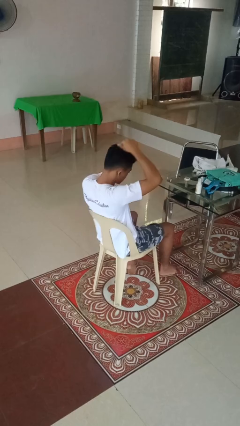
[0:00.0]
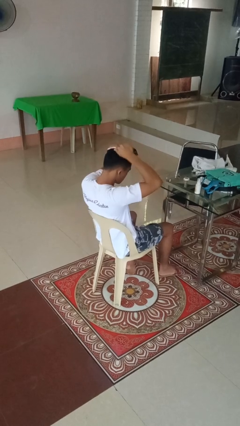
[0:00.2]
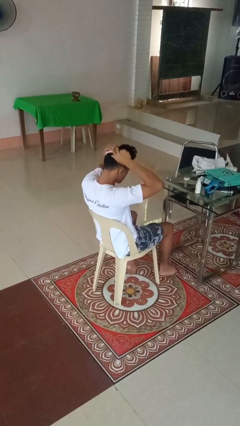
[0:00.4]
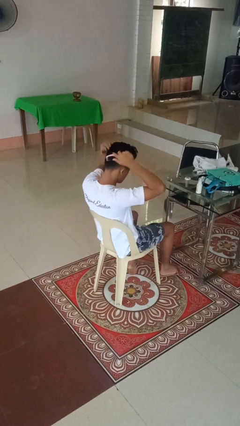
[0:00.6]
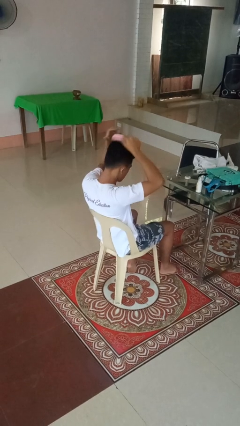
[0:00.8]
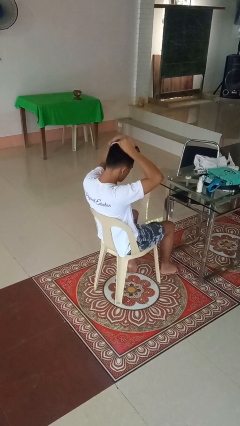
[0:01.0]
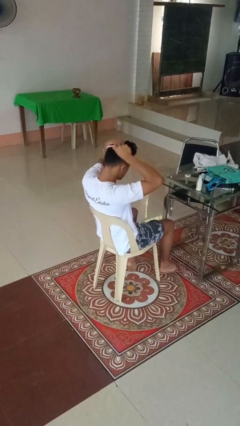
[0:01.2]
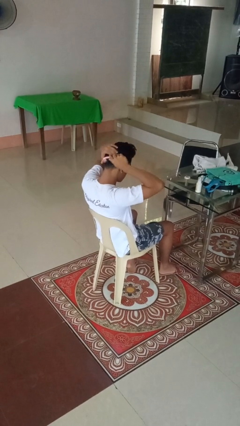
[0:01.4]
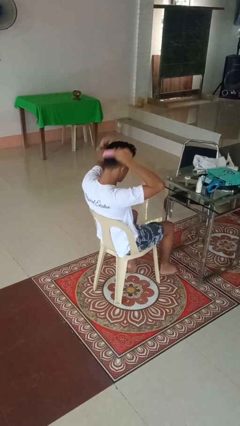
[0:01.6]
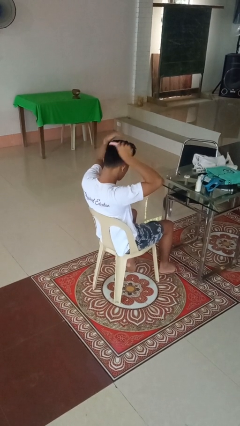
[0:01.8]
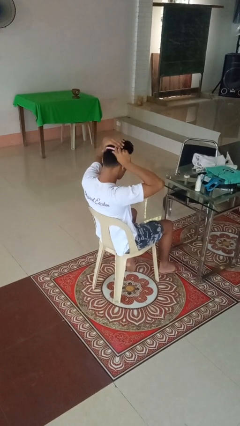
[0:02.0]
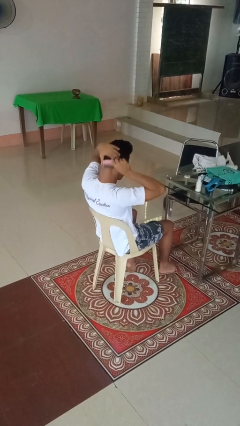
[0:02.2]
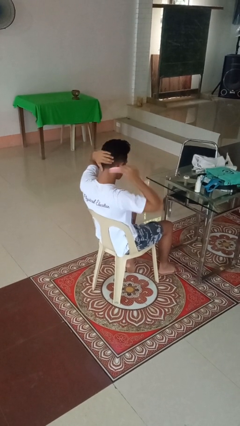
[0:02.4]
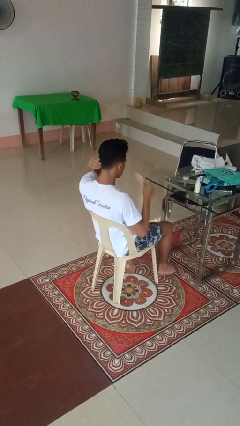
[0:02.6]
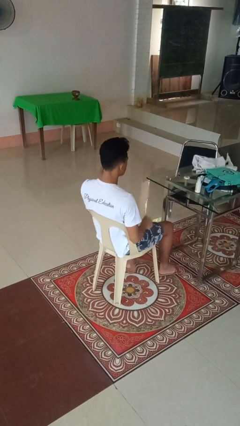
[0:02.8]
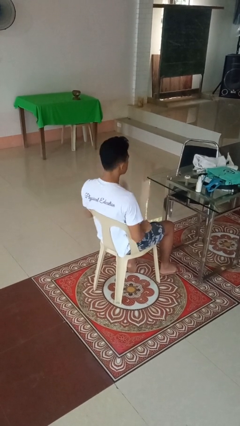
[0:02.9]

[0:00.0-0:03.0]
person brushes hair

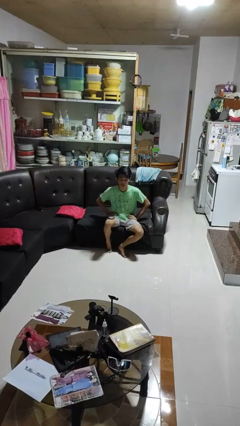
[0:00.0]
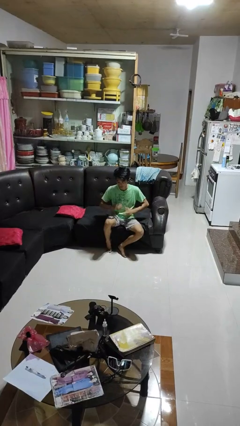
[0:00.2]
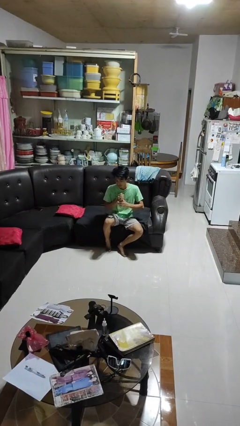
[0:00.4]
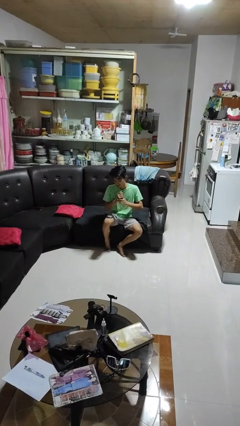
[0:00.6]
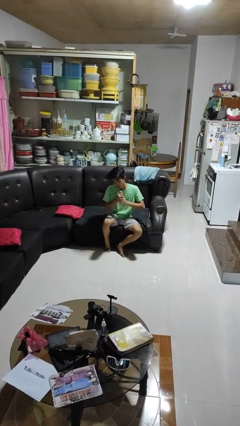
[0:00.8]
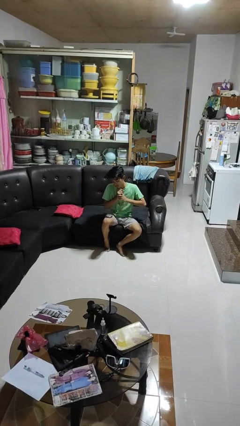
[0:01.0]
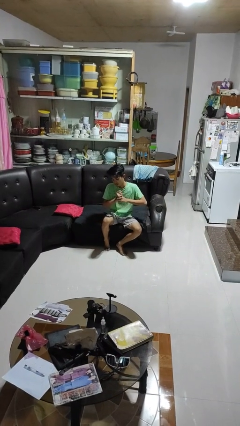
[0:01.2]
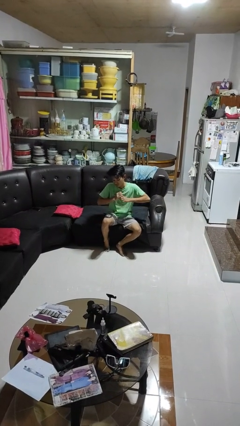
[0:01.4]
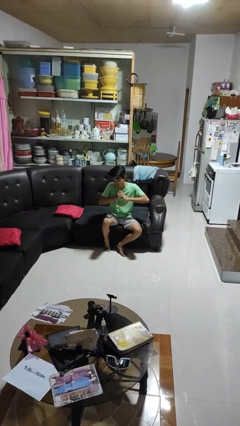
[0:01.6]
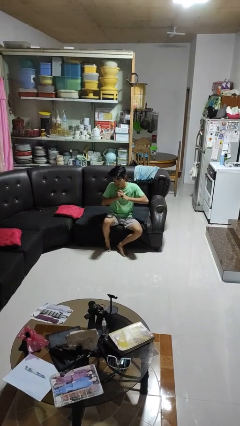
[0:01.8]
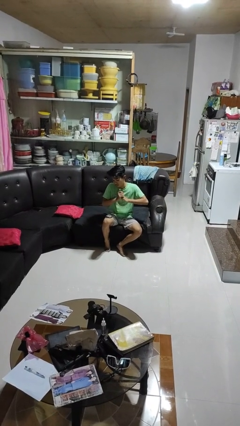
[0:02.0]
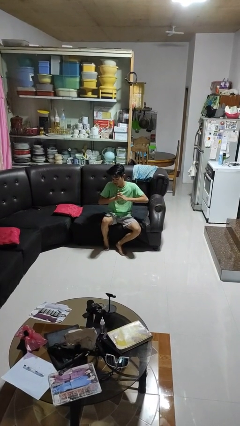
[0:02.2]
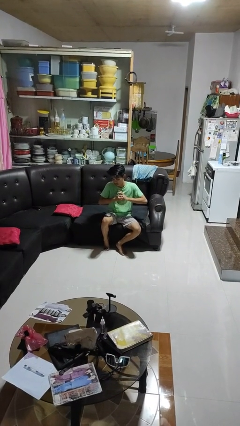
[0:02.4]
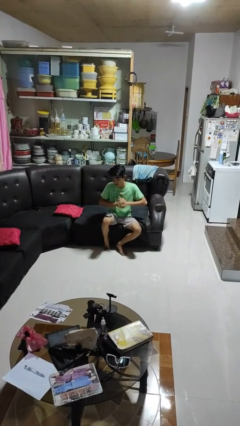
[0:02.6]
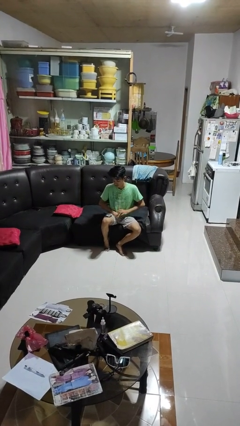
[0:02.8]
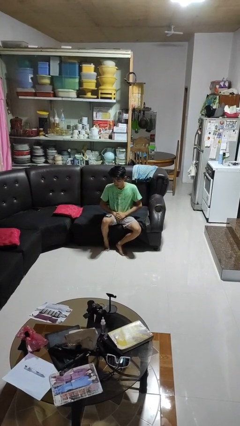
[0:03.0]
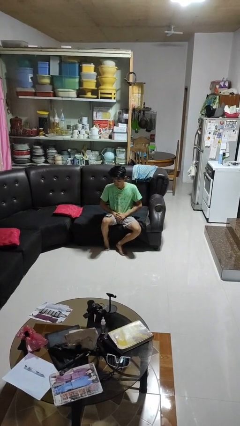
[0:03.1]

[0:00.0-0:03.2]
person cracks knuckles

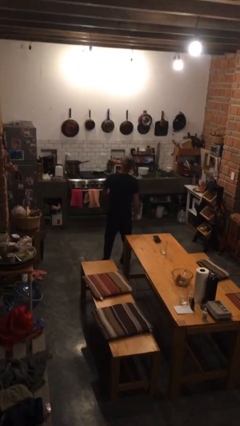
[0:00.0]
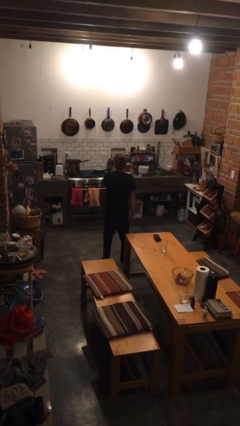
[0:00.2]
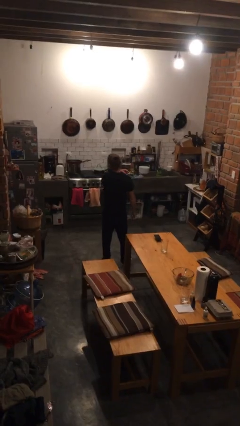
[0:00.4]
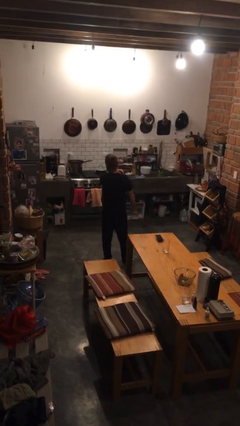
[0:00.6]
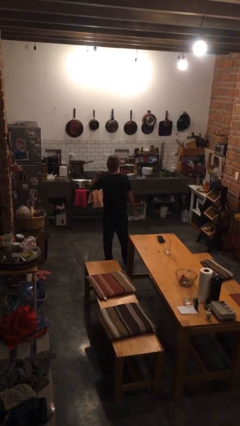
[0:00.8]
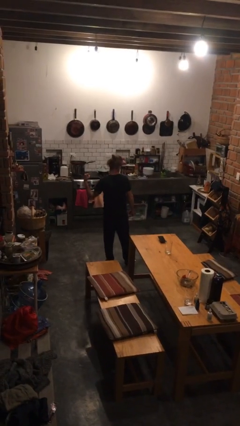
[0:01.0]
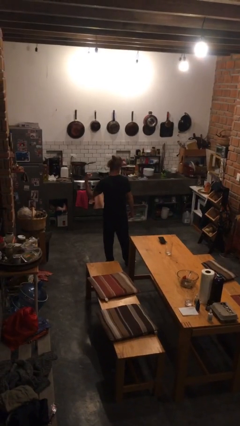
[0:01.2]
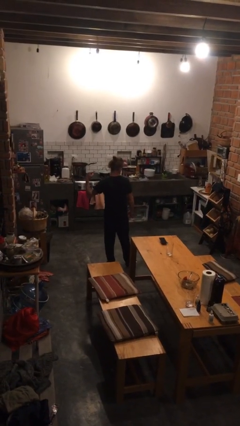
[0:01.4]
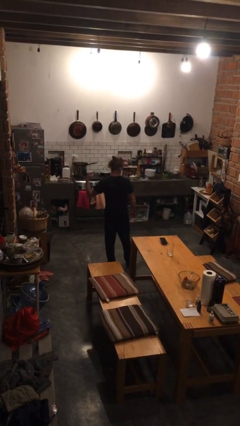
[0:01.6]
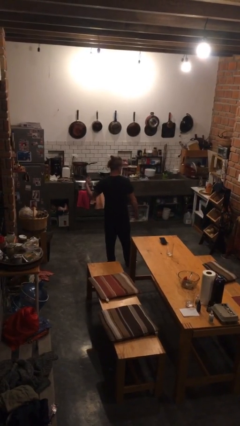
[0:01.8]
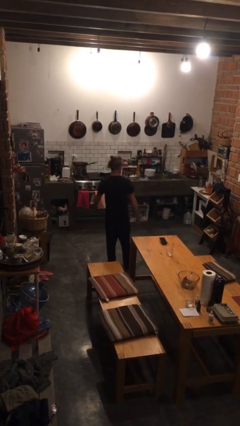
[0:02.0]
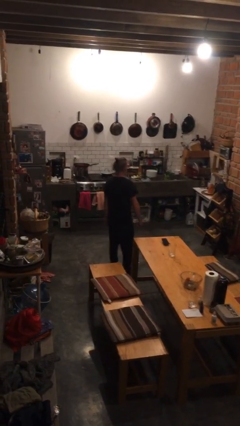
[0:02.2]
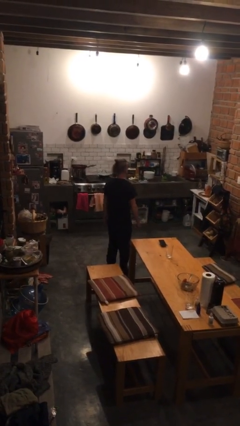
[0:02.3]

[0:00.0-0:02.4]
person gestures cut

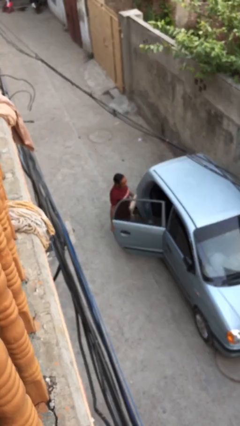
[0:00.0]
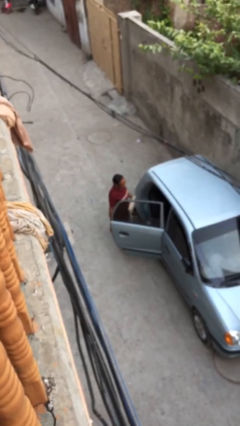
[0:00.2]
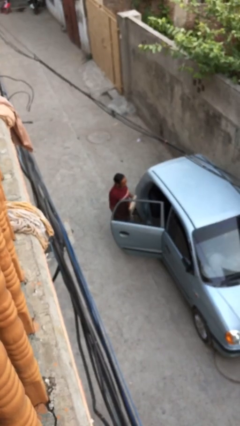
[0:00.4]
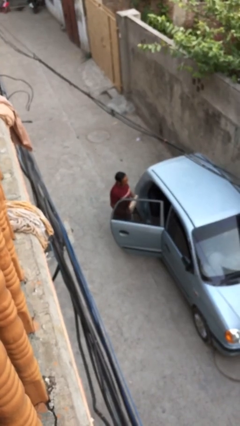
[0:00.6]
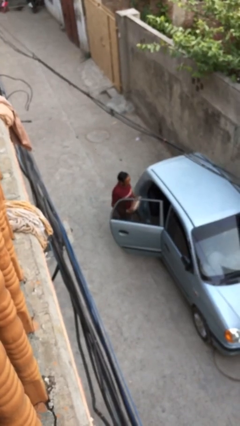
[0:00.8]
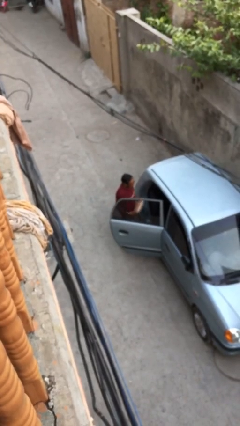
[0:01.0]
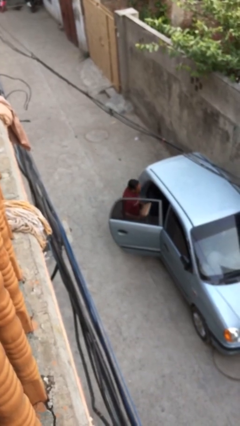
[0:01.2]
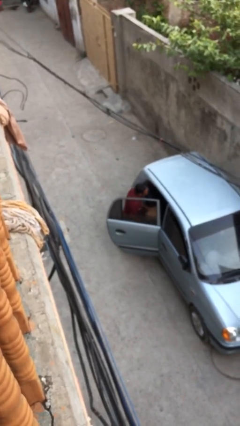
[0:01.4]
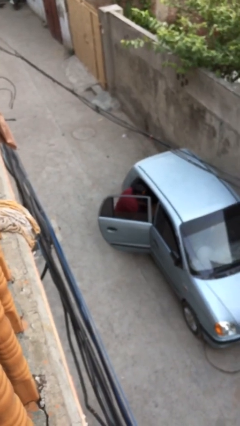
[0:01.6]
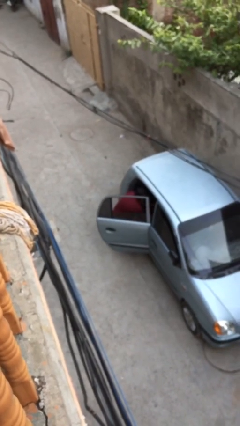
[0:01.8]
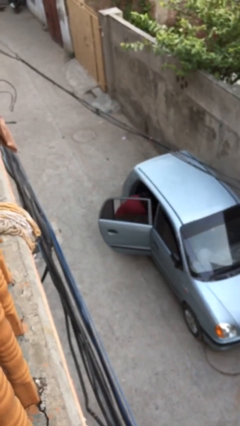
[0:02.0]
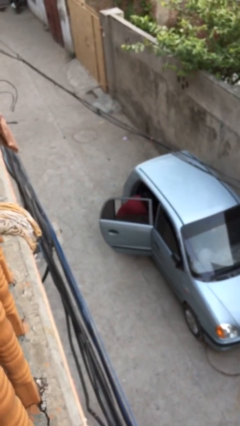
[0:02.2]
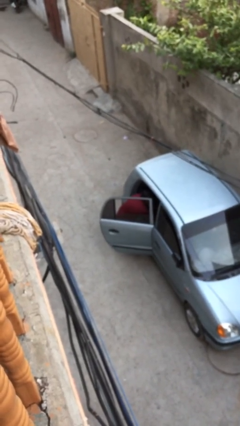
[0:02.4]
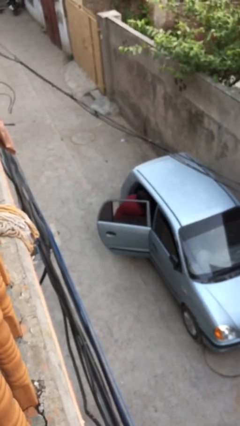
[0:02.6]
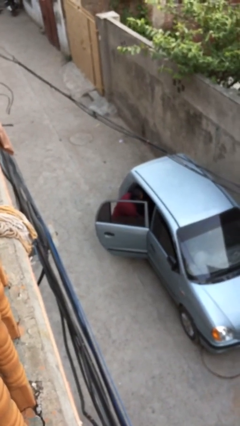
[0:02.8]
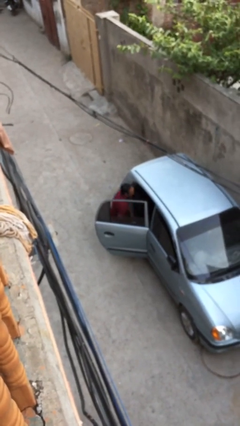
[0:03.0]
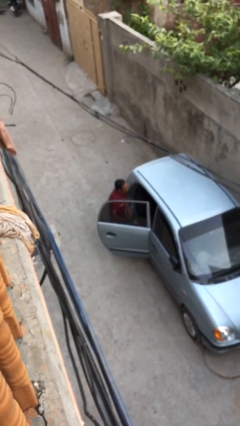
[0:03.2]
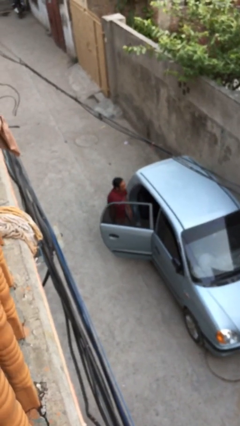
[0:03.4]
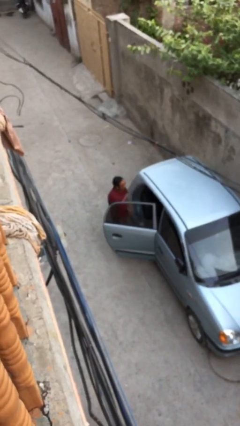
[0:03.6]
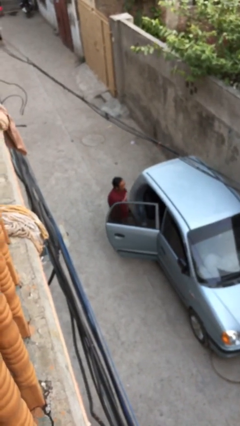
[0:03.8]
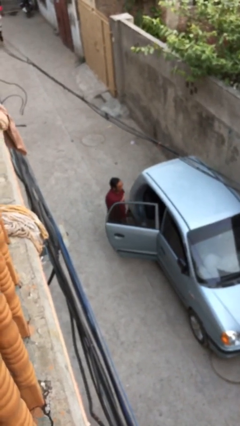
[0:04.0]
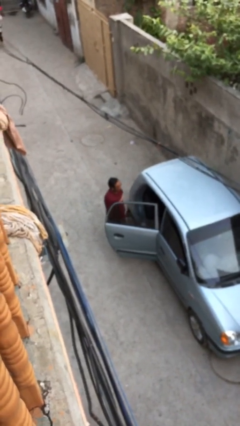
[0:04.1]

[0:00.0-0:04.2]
person loads car

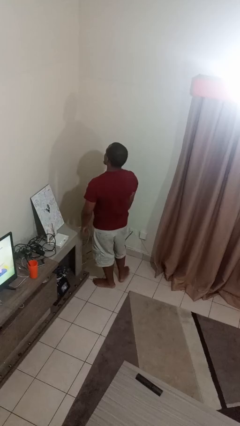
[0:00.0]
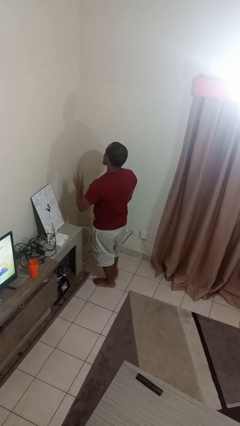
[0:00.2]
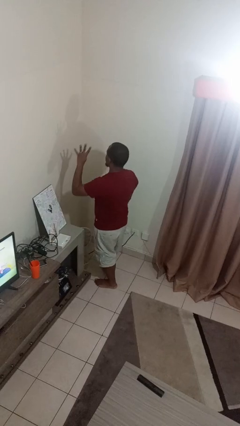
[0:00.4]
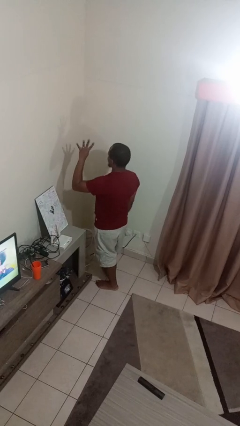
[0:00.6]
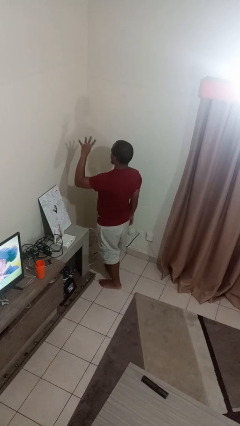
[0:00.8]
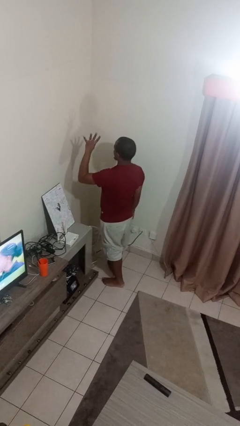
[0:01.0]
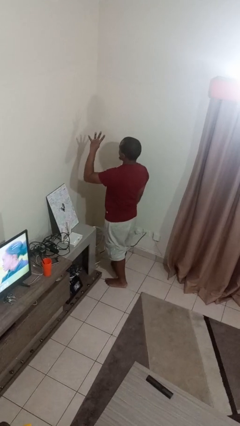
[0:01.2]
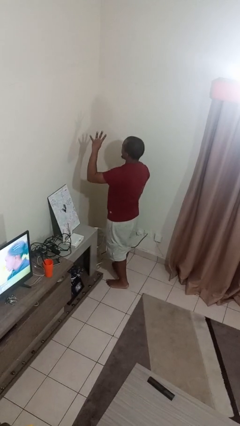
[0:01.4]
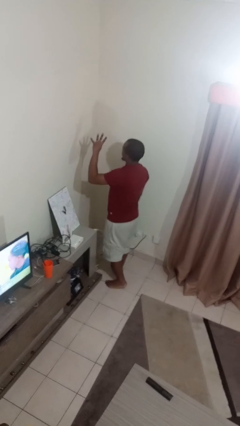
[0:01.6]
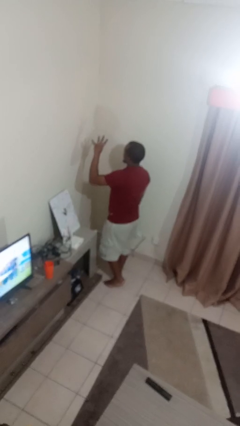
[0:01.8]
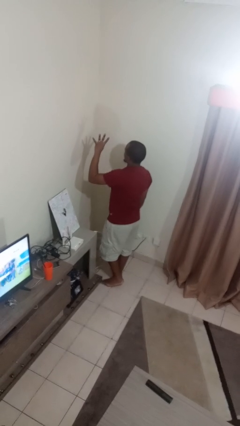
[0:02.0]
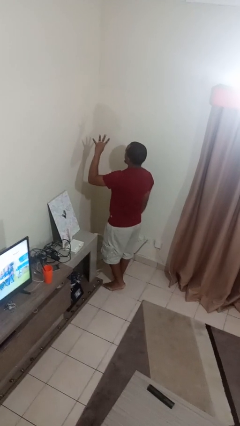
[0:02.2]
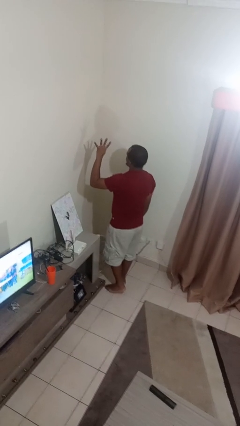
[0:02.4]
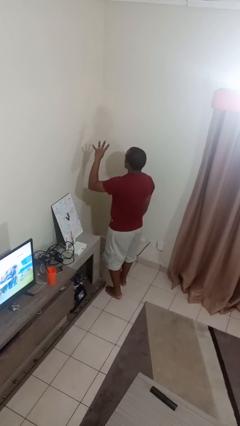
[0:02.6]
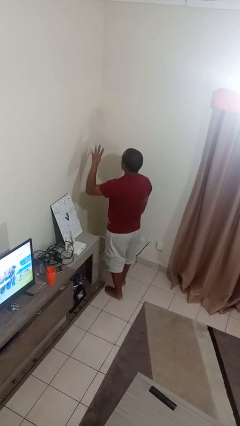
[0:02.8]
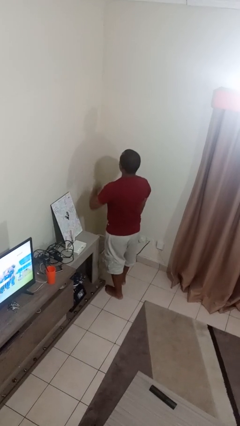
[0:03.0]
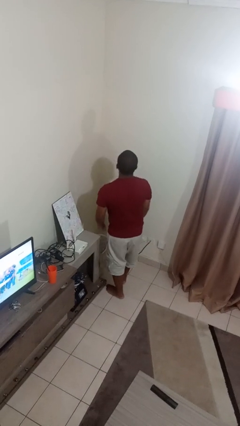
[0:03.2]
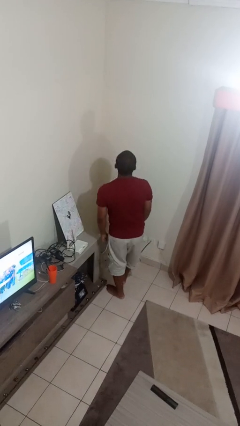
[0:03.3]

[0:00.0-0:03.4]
person gestures number four

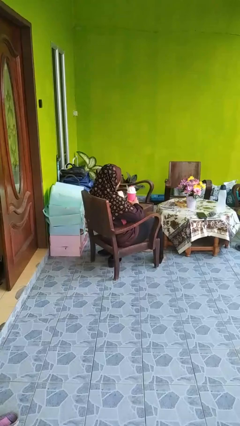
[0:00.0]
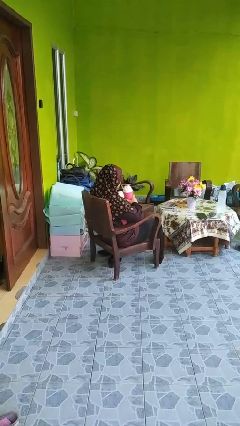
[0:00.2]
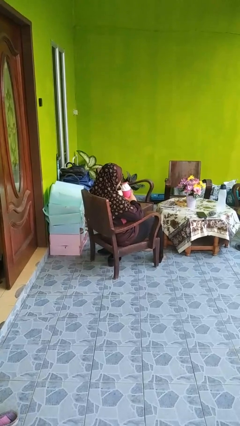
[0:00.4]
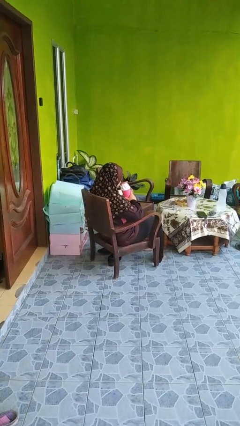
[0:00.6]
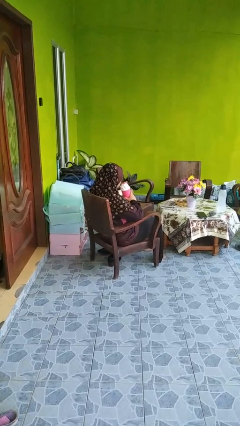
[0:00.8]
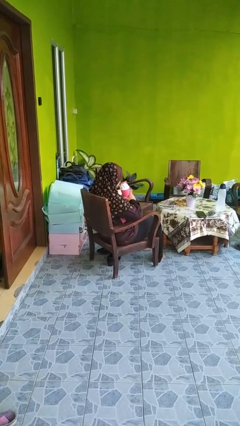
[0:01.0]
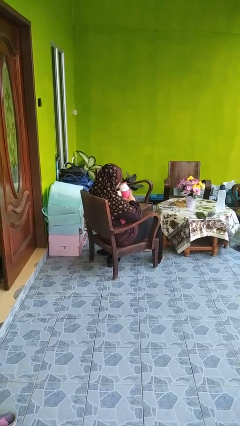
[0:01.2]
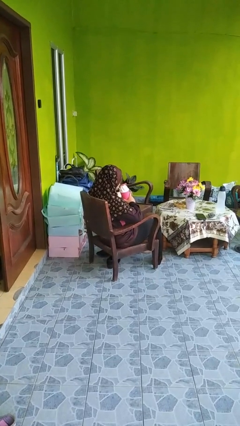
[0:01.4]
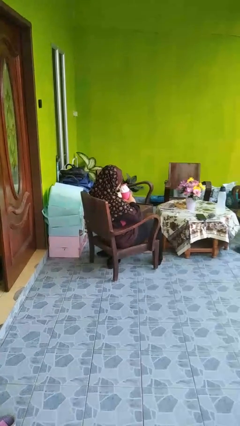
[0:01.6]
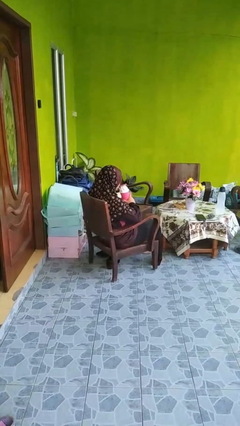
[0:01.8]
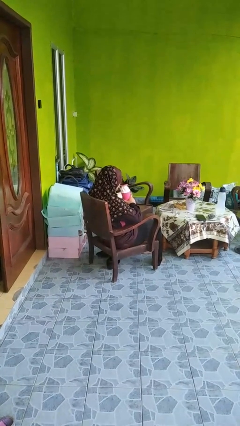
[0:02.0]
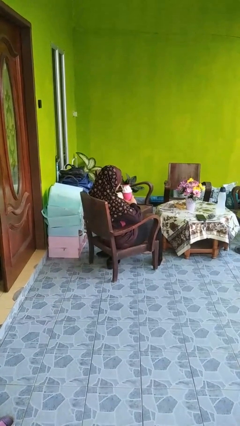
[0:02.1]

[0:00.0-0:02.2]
person drinks from straw
